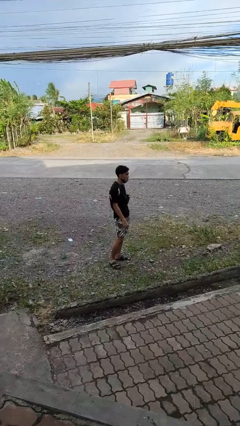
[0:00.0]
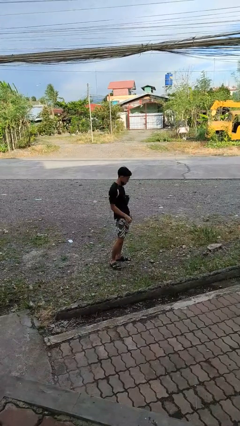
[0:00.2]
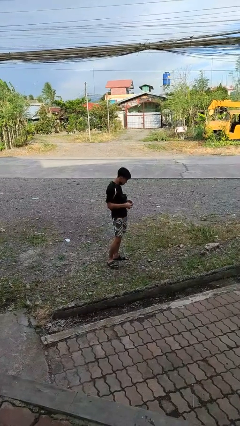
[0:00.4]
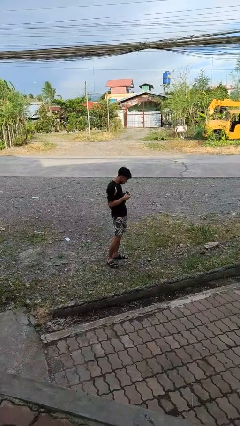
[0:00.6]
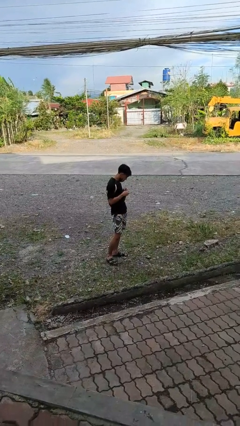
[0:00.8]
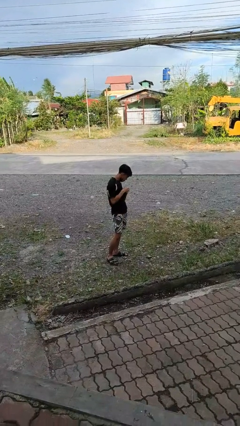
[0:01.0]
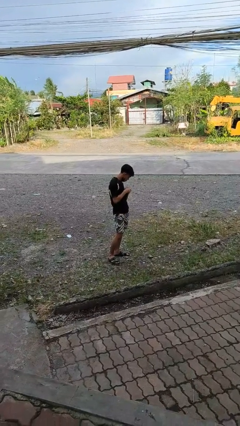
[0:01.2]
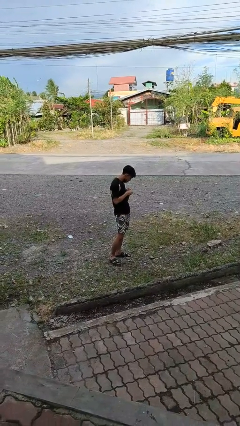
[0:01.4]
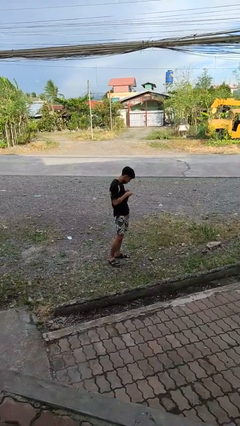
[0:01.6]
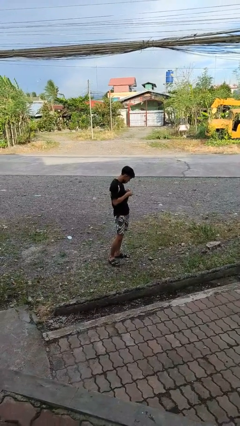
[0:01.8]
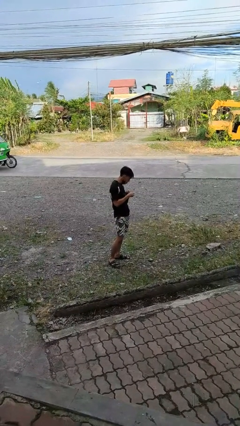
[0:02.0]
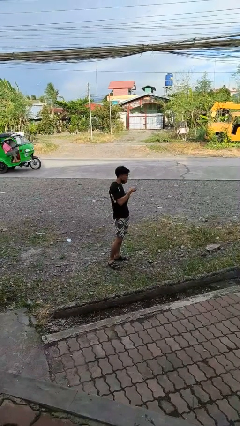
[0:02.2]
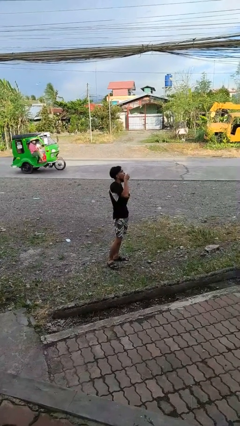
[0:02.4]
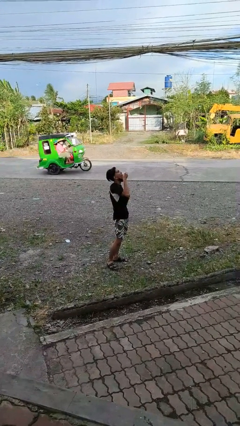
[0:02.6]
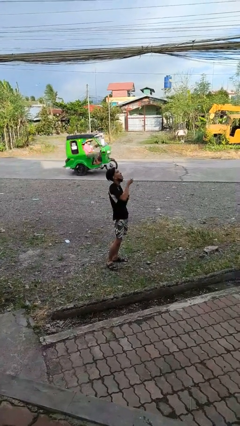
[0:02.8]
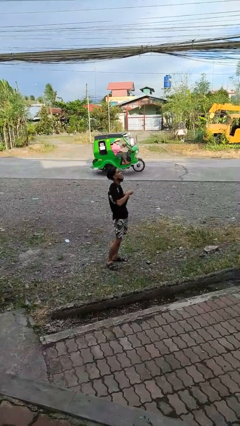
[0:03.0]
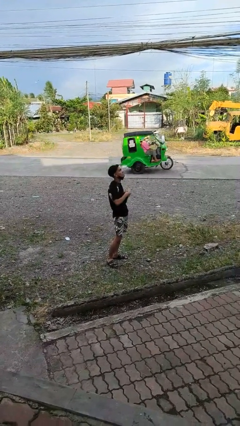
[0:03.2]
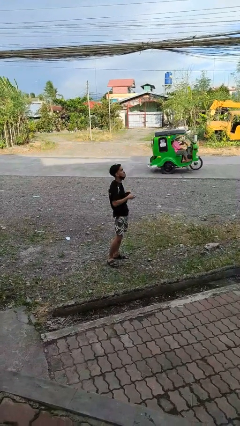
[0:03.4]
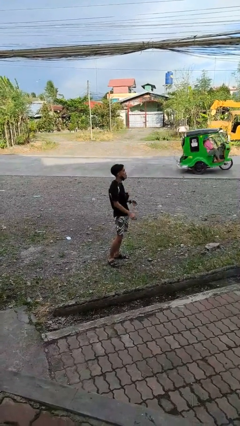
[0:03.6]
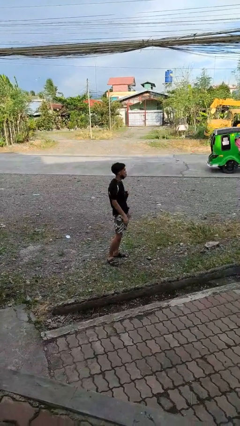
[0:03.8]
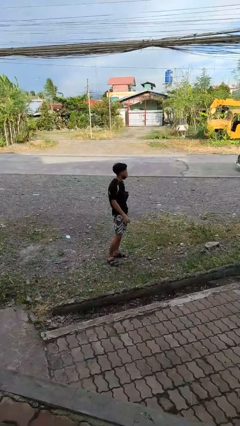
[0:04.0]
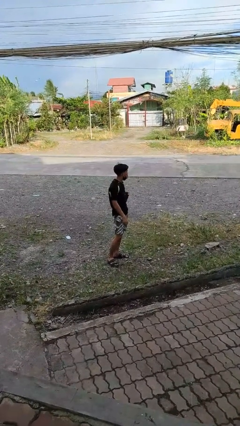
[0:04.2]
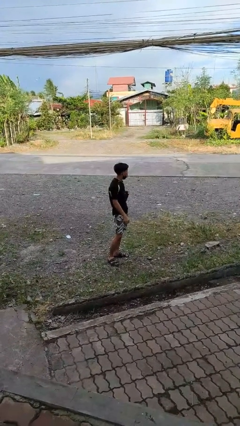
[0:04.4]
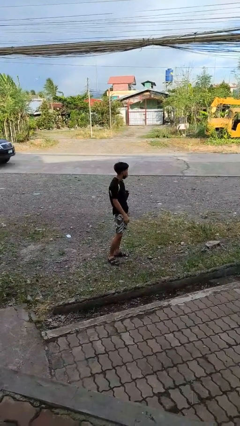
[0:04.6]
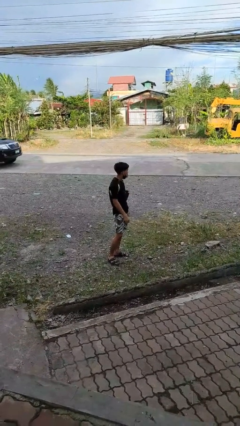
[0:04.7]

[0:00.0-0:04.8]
person eats snack from bag

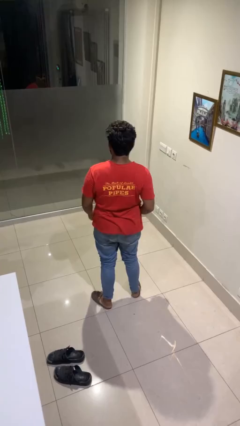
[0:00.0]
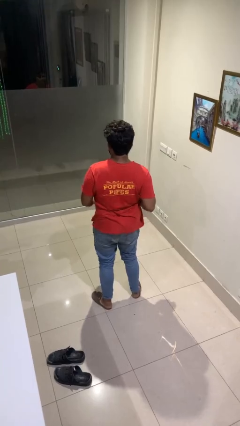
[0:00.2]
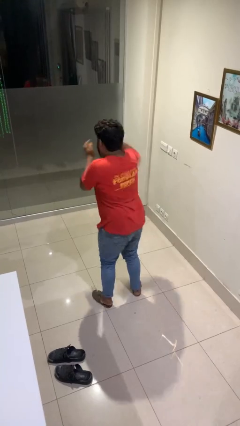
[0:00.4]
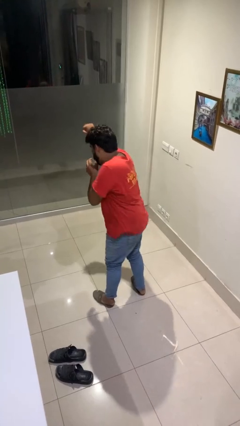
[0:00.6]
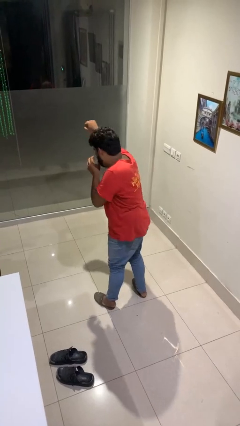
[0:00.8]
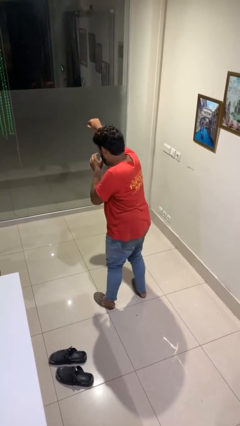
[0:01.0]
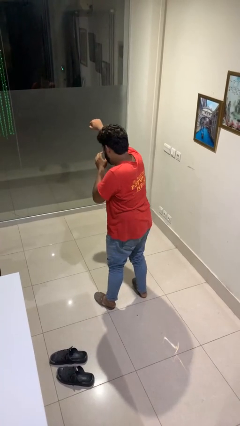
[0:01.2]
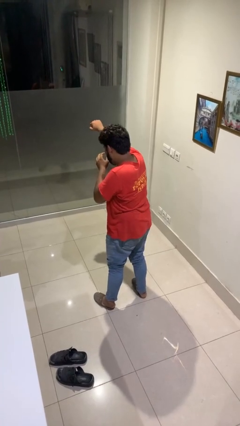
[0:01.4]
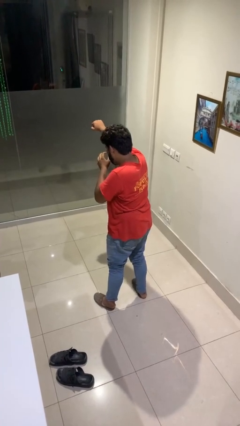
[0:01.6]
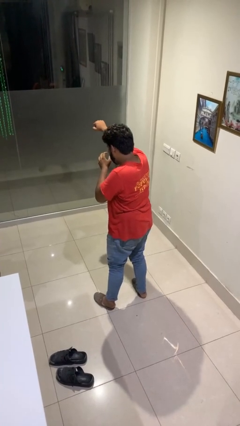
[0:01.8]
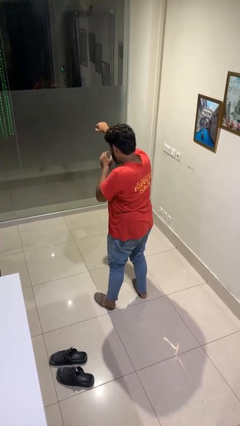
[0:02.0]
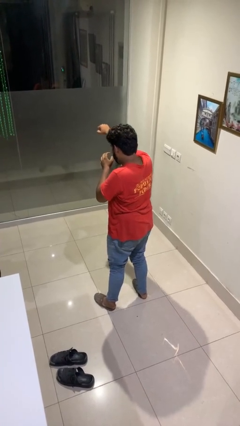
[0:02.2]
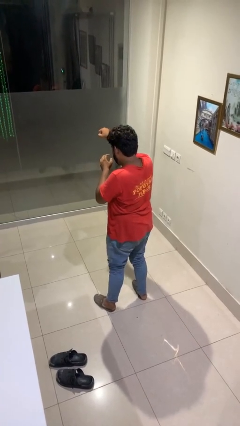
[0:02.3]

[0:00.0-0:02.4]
person punches

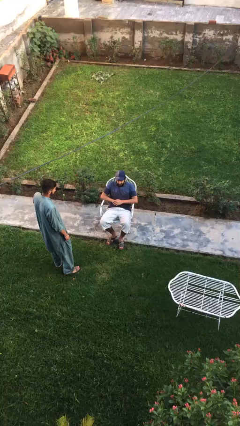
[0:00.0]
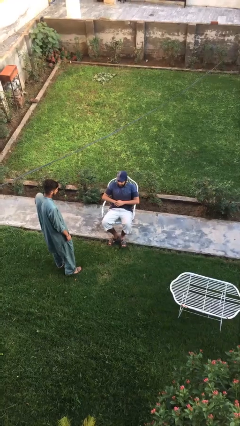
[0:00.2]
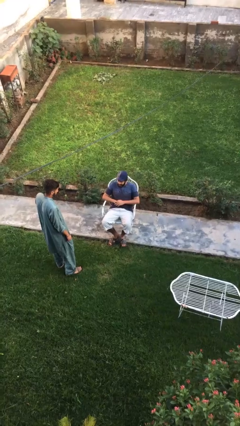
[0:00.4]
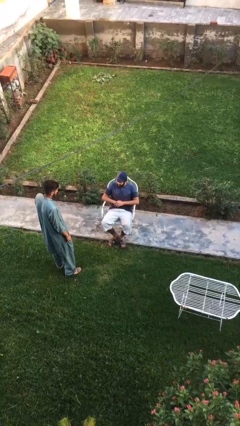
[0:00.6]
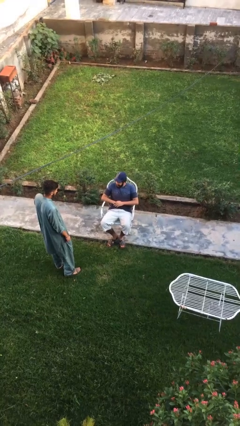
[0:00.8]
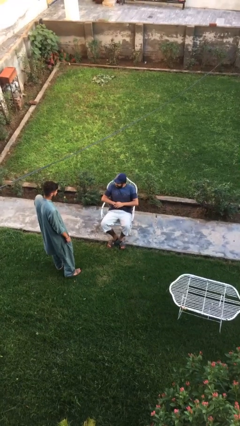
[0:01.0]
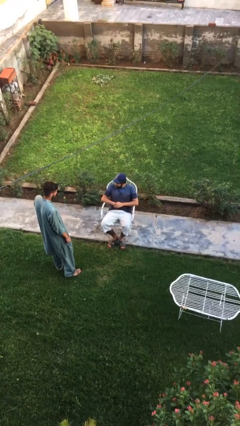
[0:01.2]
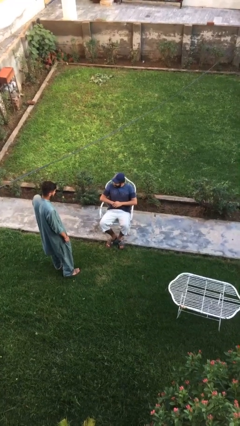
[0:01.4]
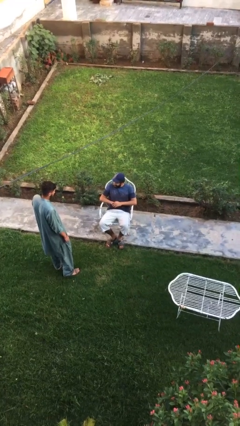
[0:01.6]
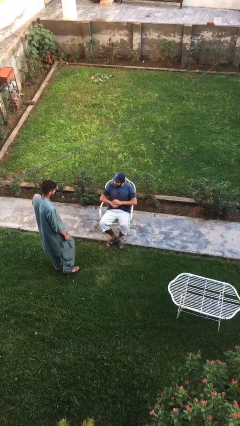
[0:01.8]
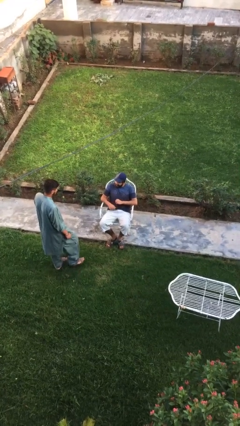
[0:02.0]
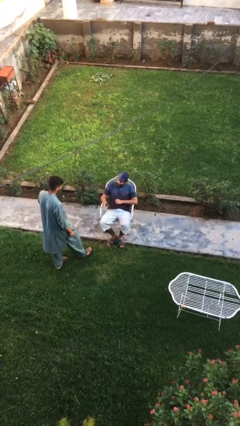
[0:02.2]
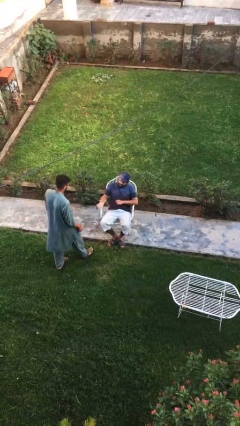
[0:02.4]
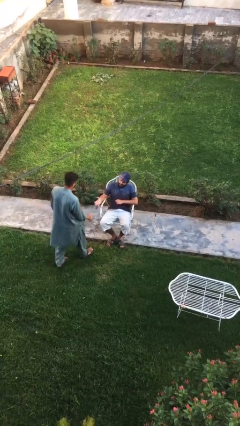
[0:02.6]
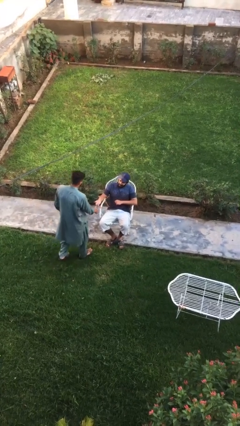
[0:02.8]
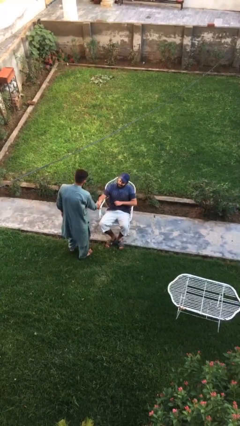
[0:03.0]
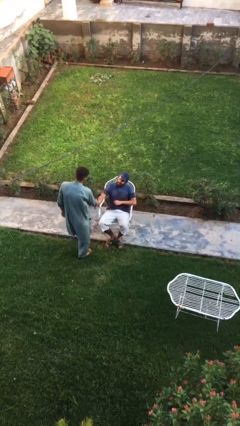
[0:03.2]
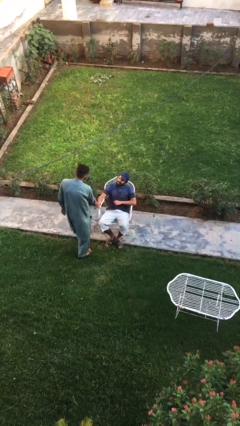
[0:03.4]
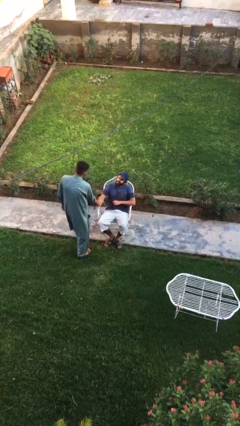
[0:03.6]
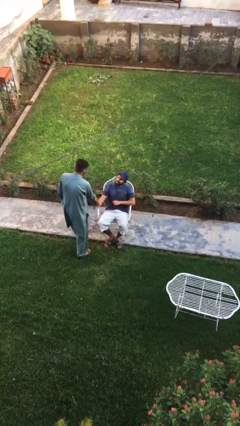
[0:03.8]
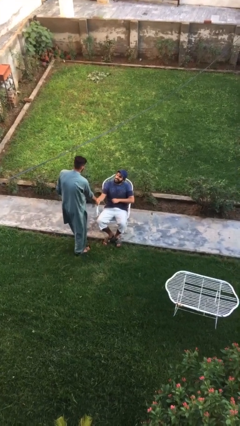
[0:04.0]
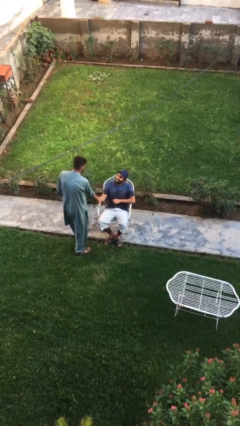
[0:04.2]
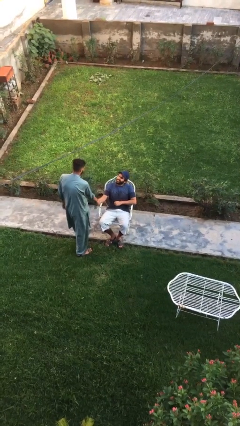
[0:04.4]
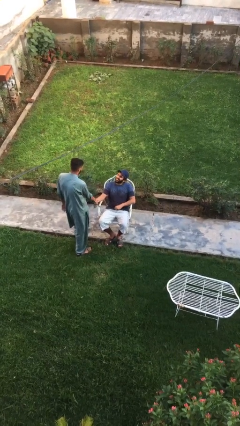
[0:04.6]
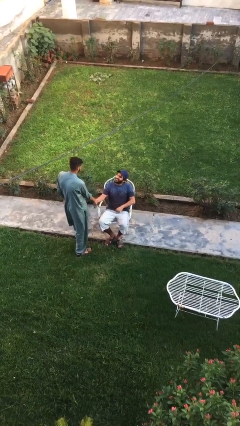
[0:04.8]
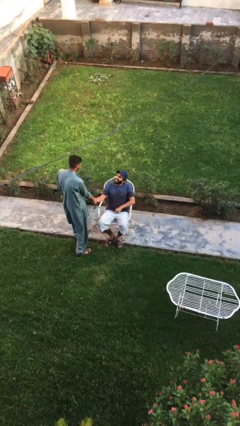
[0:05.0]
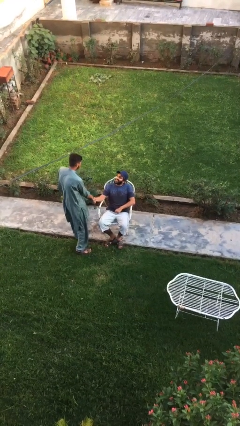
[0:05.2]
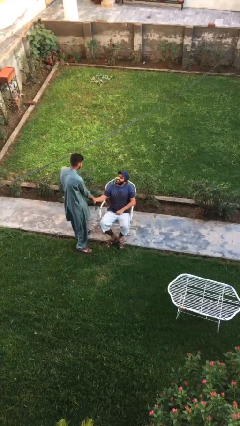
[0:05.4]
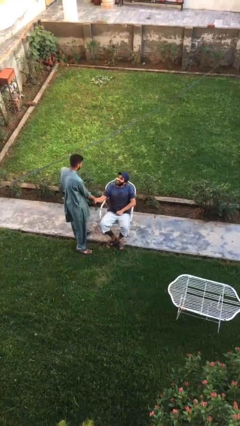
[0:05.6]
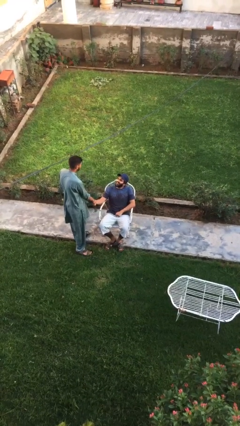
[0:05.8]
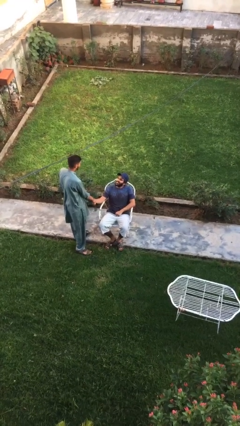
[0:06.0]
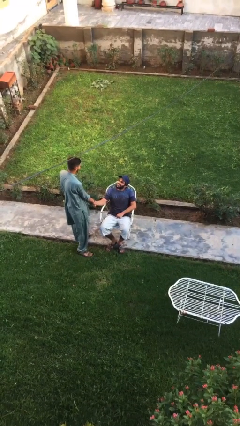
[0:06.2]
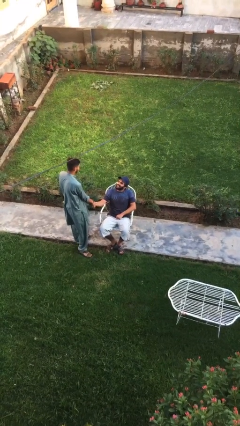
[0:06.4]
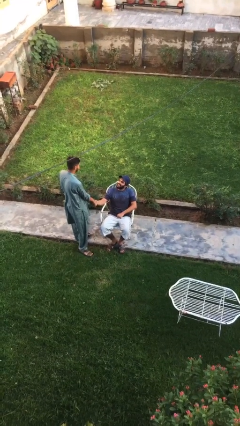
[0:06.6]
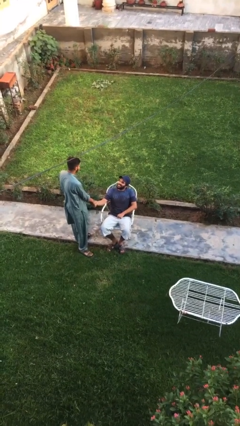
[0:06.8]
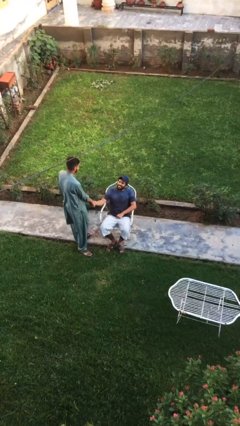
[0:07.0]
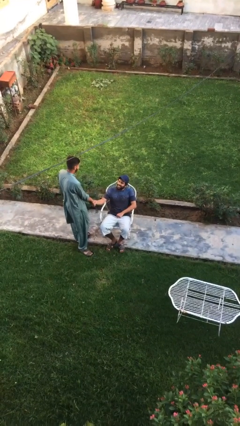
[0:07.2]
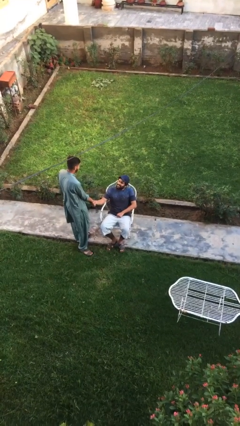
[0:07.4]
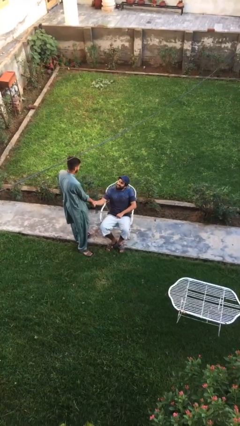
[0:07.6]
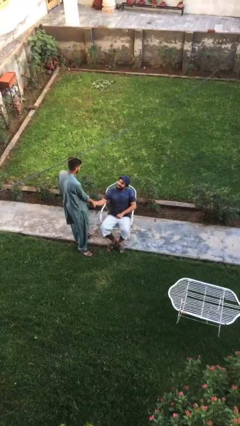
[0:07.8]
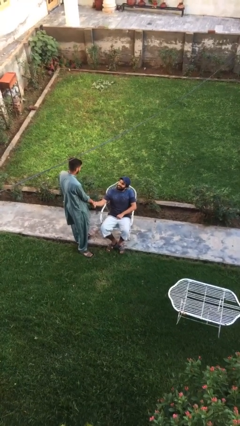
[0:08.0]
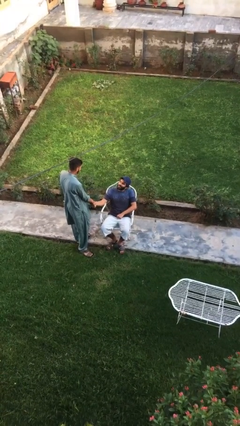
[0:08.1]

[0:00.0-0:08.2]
person shakes hand

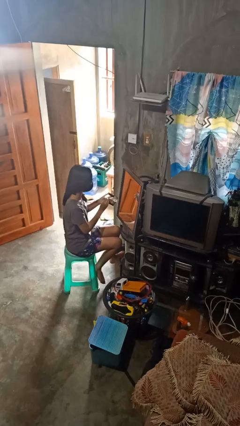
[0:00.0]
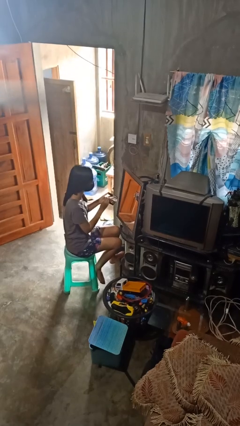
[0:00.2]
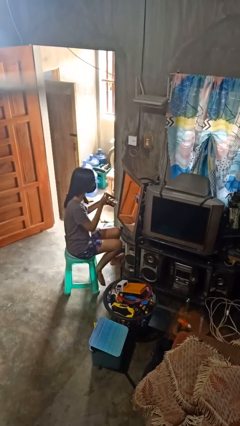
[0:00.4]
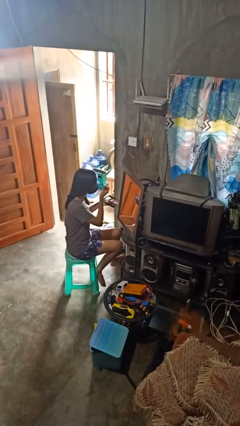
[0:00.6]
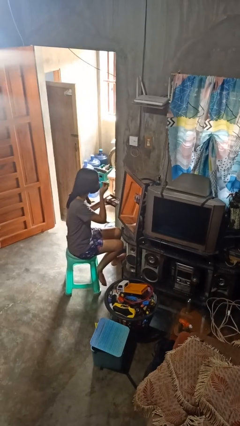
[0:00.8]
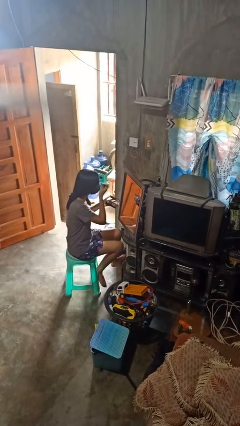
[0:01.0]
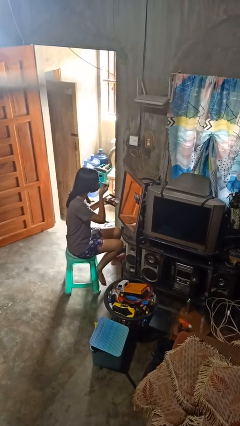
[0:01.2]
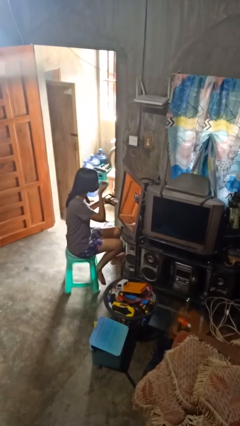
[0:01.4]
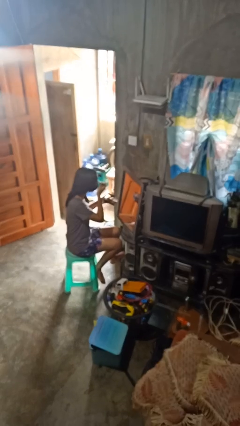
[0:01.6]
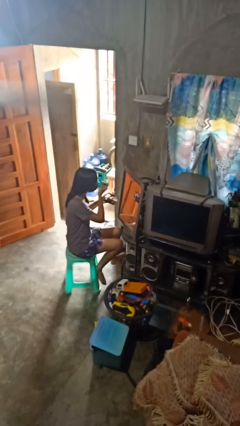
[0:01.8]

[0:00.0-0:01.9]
person applies eye makeup

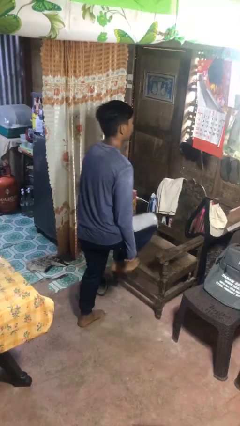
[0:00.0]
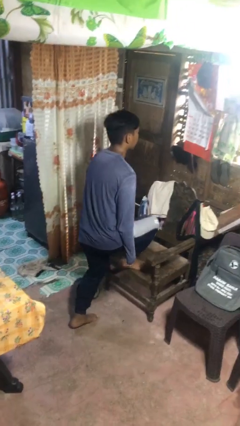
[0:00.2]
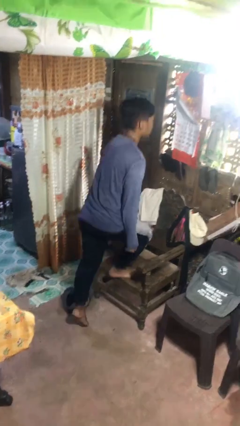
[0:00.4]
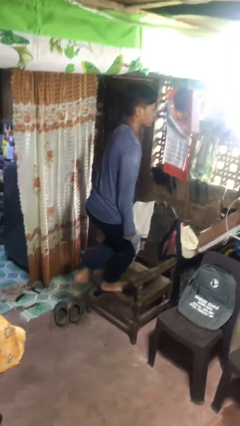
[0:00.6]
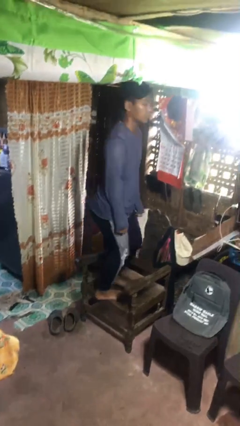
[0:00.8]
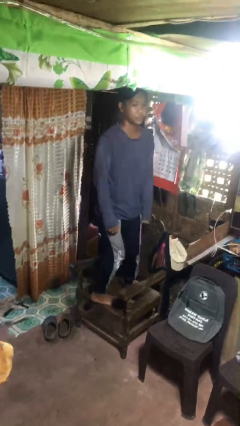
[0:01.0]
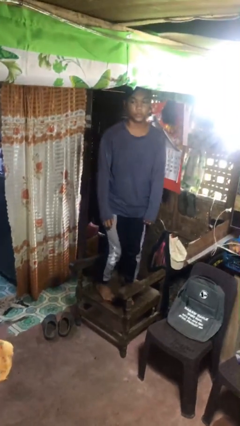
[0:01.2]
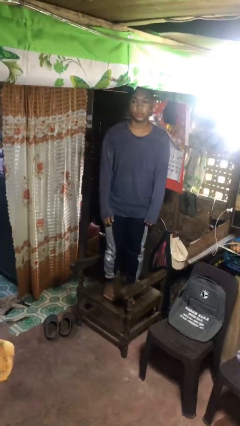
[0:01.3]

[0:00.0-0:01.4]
person climbs on chair
